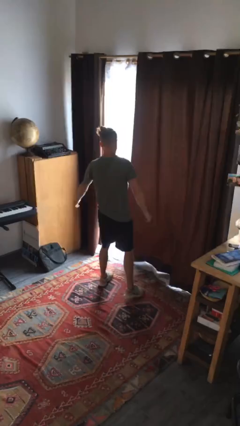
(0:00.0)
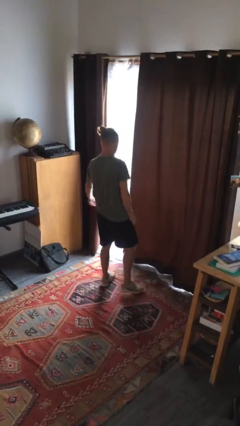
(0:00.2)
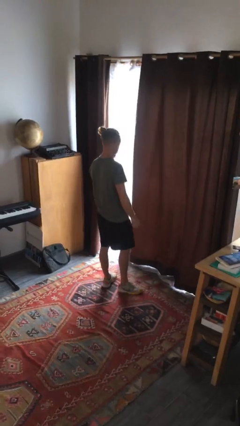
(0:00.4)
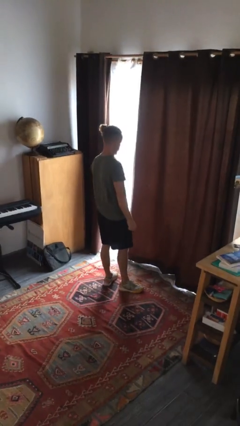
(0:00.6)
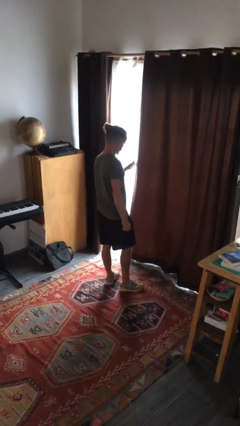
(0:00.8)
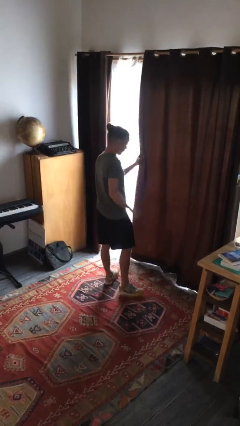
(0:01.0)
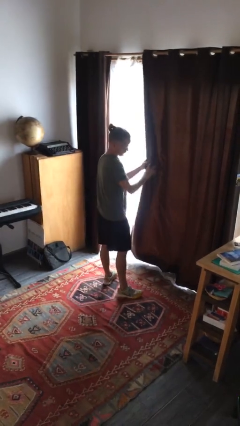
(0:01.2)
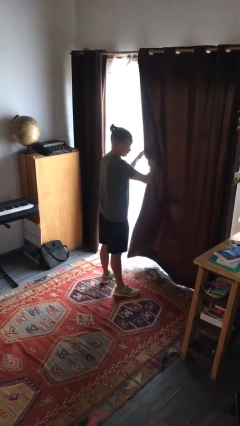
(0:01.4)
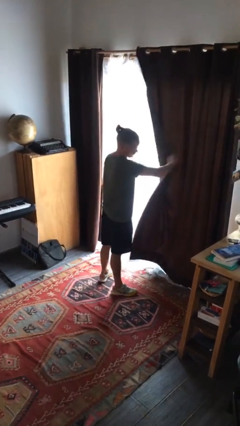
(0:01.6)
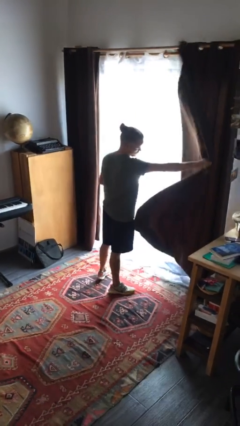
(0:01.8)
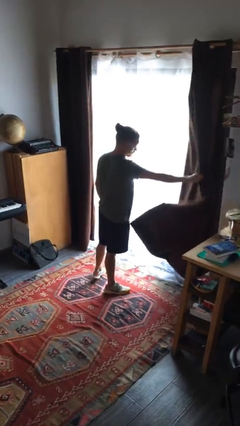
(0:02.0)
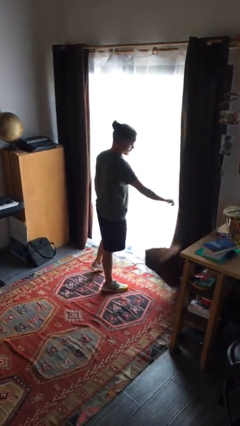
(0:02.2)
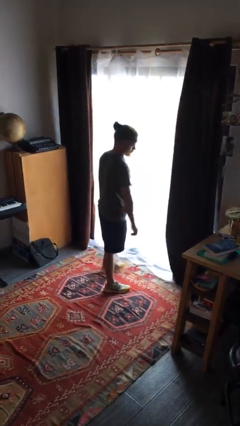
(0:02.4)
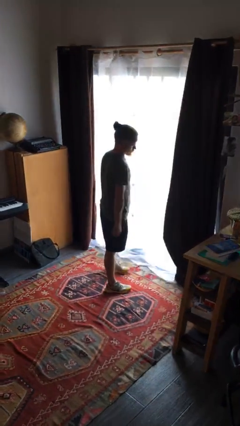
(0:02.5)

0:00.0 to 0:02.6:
person opens curtains

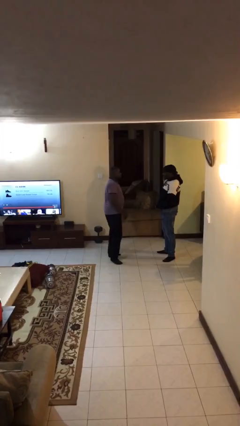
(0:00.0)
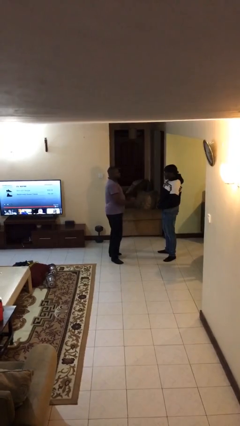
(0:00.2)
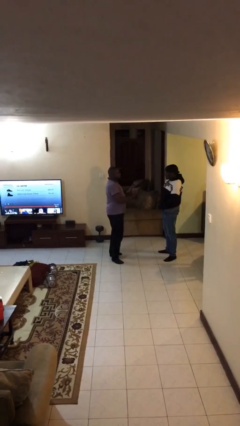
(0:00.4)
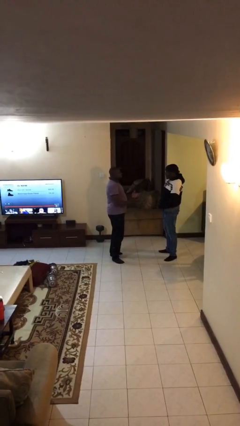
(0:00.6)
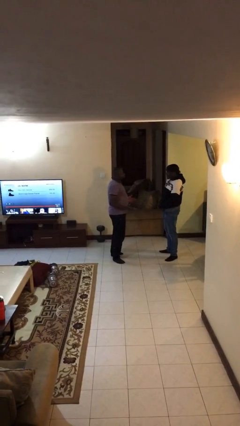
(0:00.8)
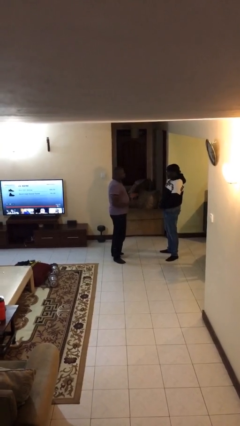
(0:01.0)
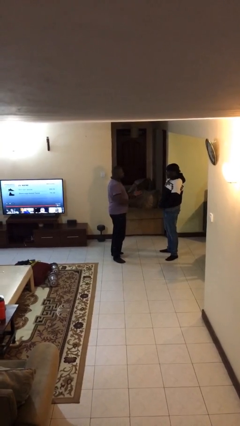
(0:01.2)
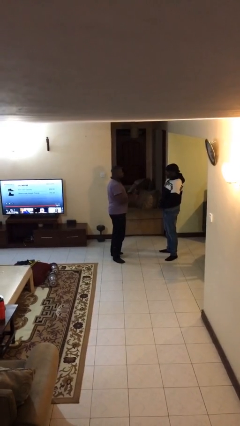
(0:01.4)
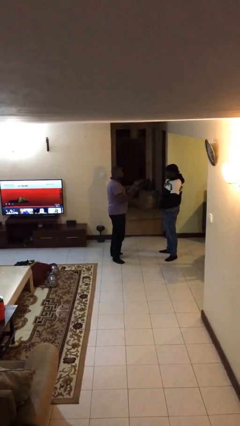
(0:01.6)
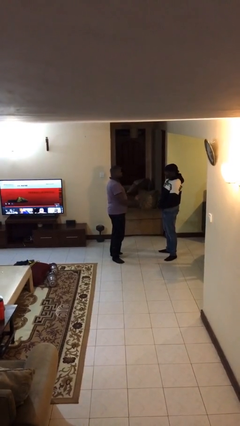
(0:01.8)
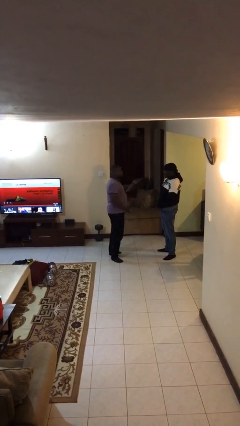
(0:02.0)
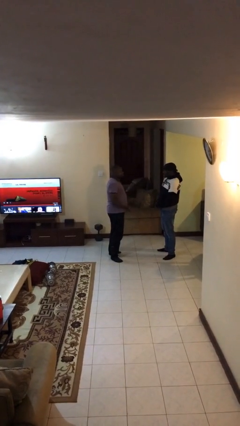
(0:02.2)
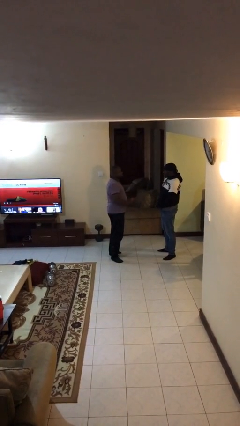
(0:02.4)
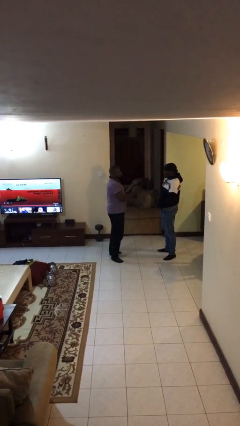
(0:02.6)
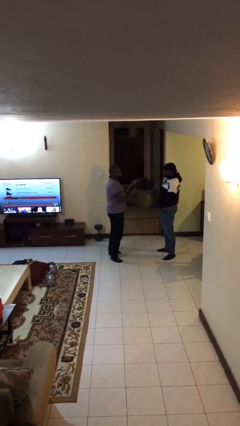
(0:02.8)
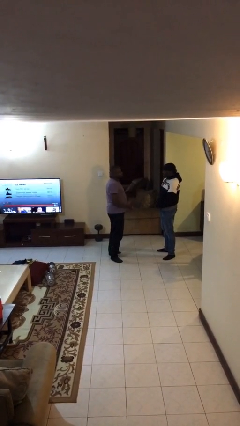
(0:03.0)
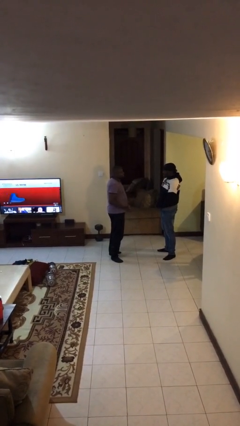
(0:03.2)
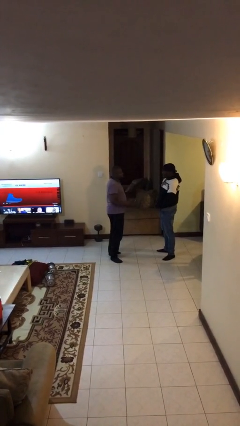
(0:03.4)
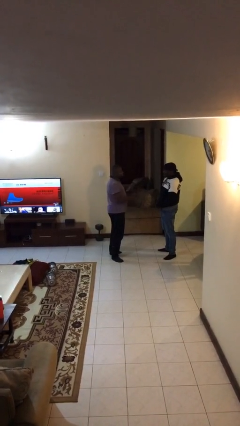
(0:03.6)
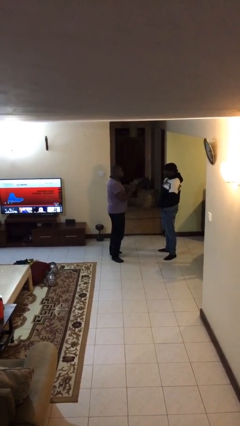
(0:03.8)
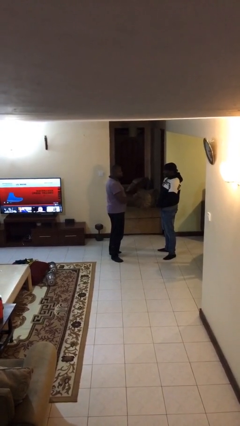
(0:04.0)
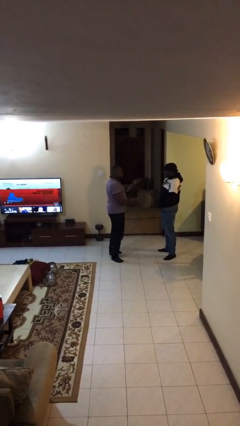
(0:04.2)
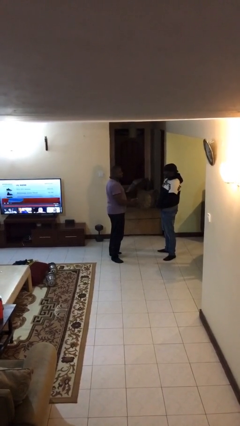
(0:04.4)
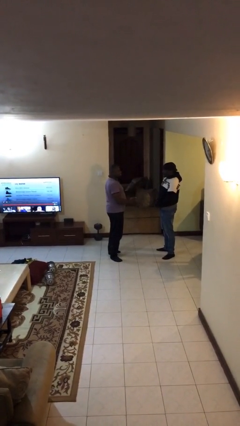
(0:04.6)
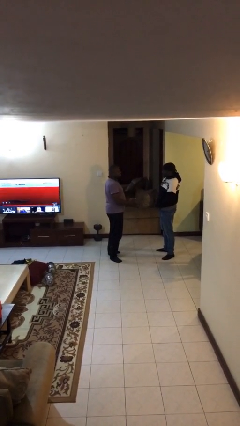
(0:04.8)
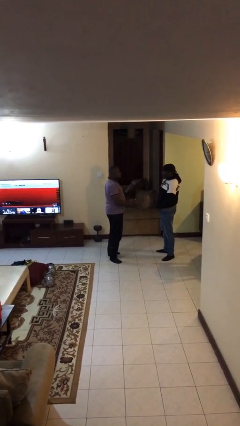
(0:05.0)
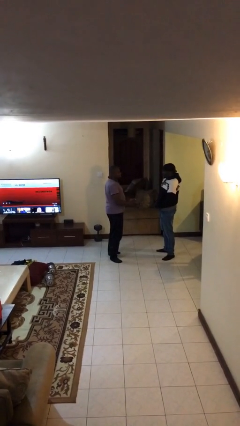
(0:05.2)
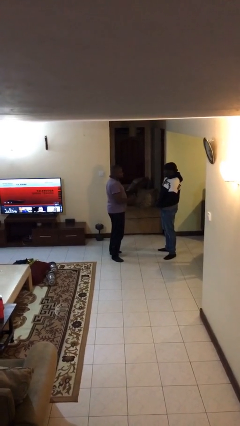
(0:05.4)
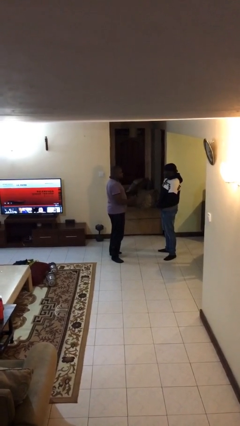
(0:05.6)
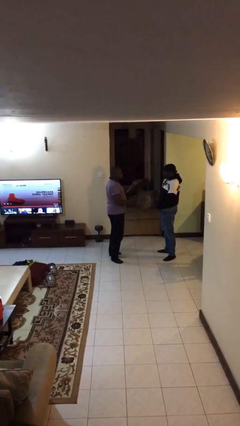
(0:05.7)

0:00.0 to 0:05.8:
person talks to person

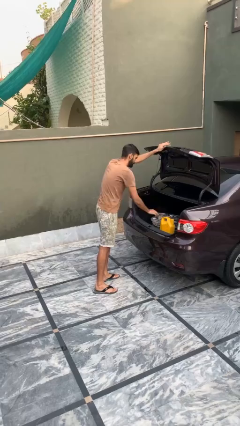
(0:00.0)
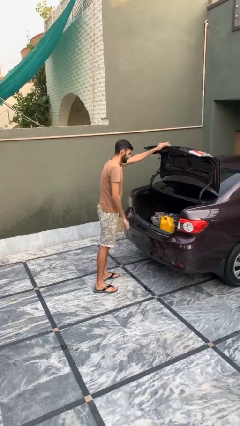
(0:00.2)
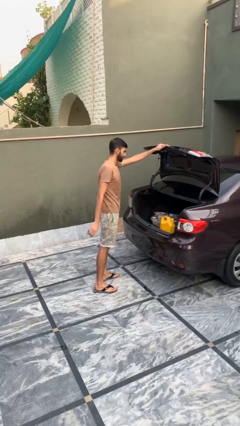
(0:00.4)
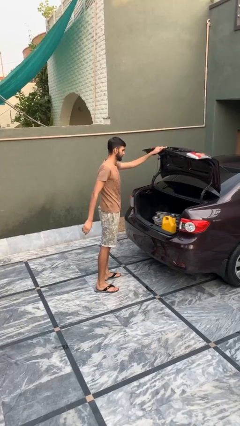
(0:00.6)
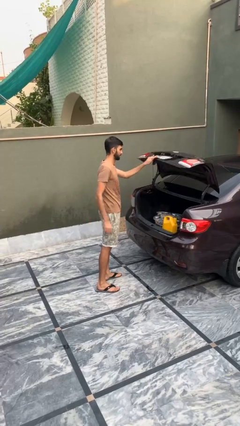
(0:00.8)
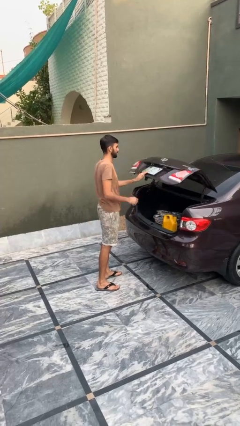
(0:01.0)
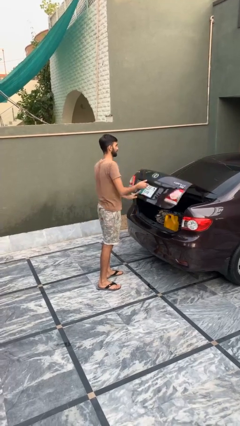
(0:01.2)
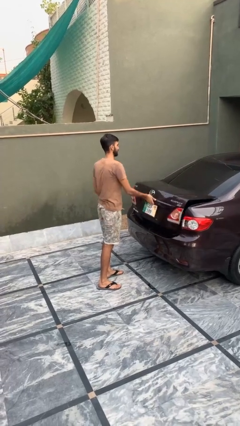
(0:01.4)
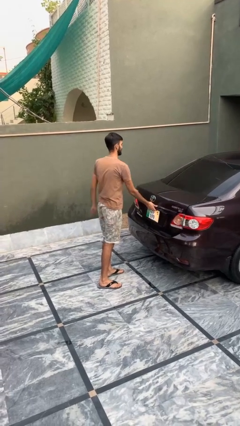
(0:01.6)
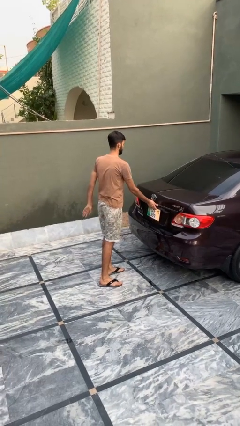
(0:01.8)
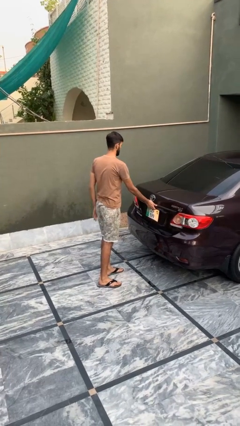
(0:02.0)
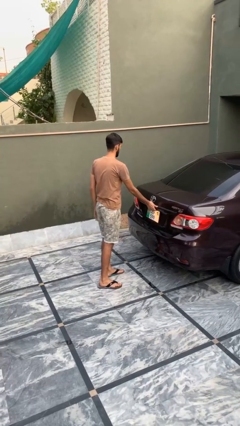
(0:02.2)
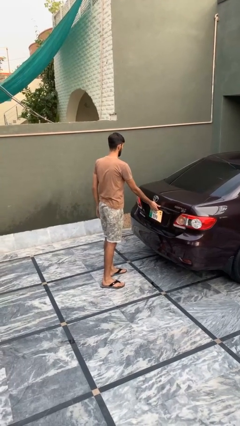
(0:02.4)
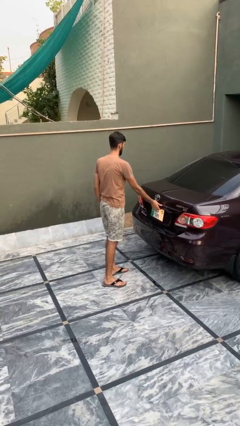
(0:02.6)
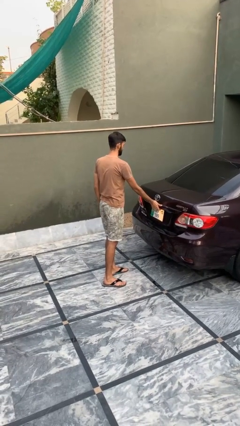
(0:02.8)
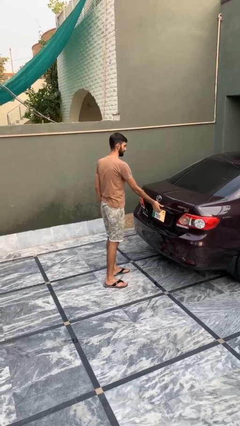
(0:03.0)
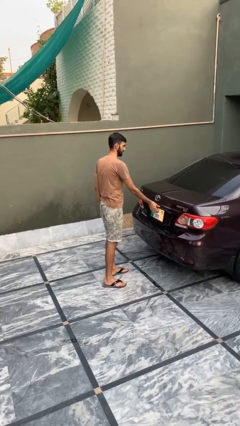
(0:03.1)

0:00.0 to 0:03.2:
person closes car trunk

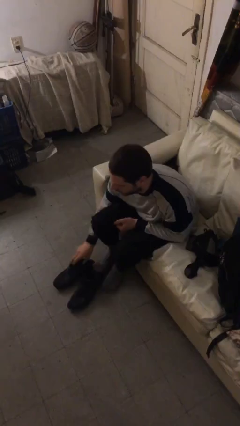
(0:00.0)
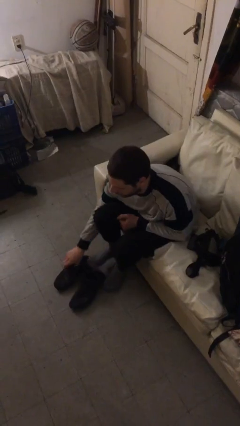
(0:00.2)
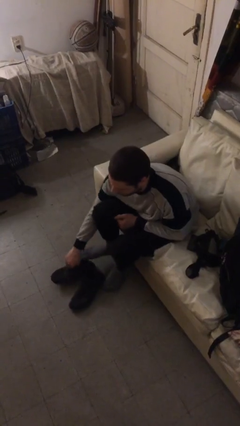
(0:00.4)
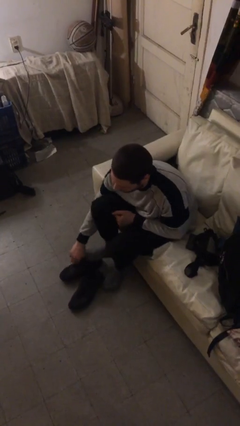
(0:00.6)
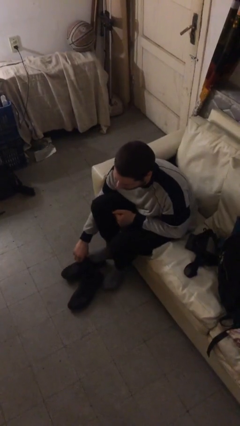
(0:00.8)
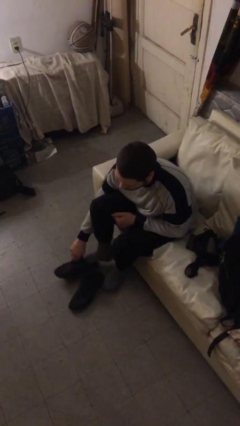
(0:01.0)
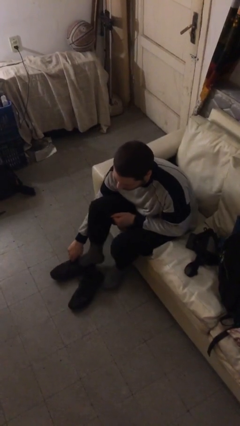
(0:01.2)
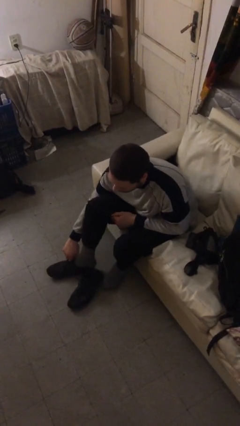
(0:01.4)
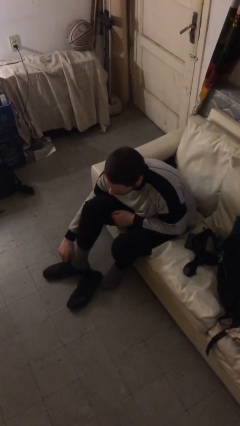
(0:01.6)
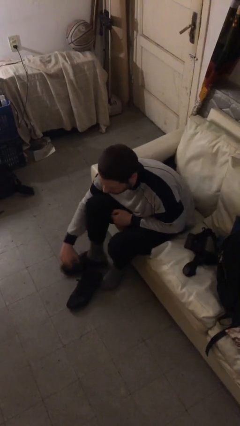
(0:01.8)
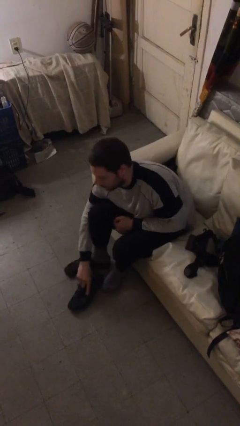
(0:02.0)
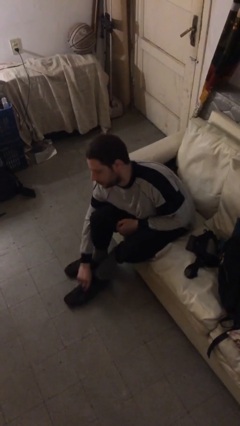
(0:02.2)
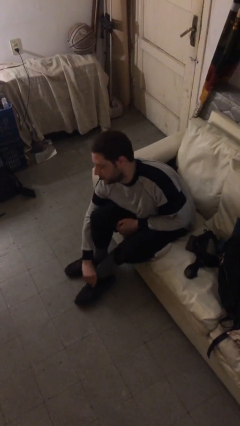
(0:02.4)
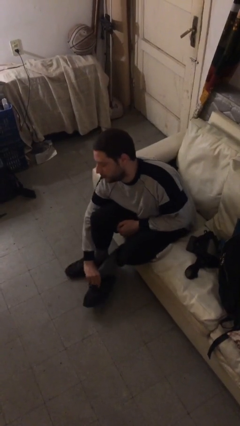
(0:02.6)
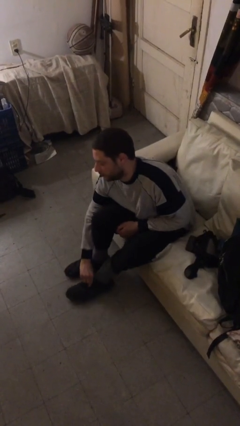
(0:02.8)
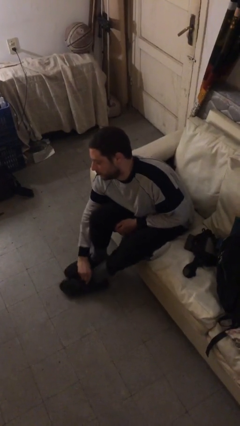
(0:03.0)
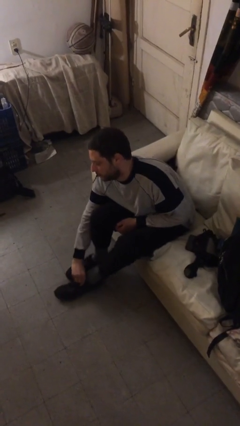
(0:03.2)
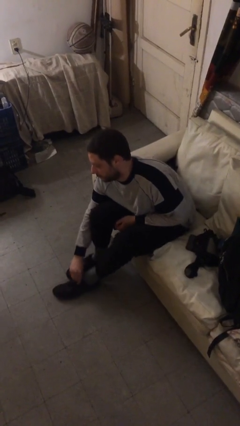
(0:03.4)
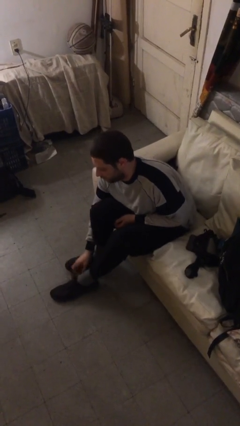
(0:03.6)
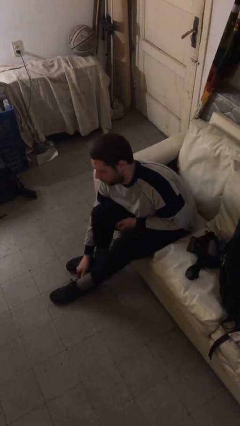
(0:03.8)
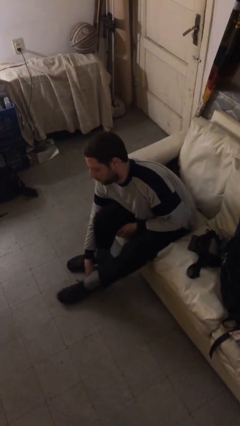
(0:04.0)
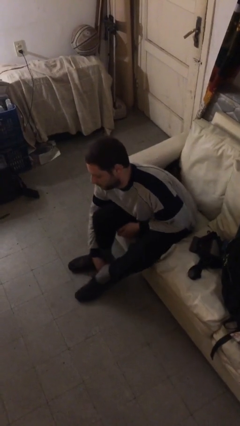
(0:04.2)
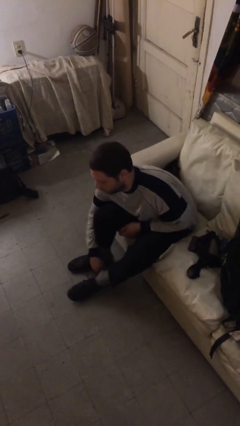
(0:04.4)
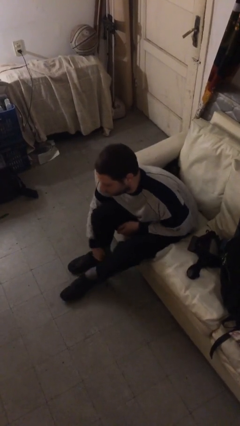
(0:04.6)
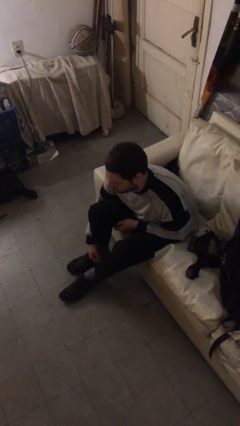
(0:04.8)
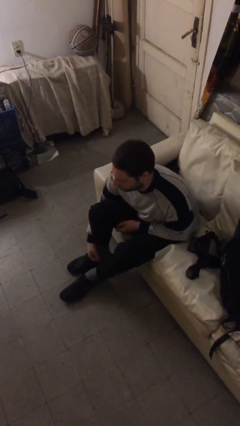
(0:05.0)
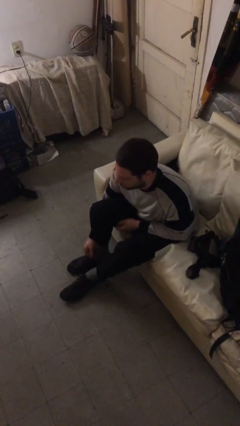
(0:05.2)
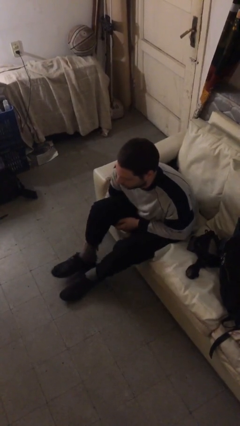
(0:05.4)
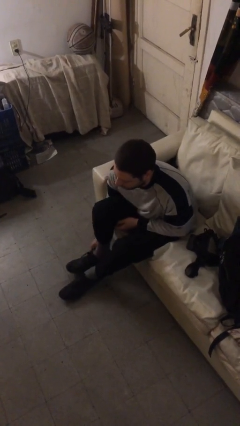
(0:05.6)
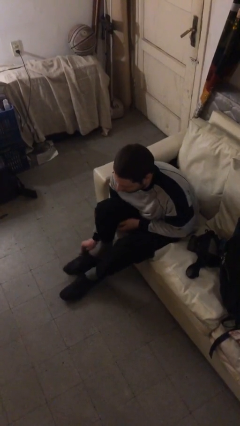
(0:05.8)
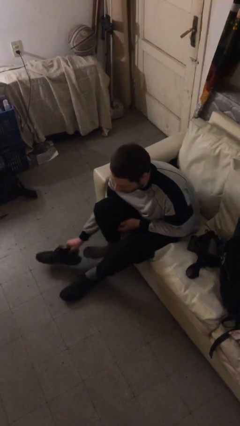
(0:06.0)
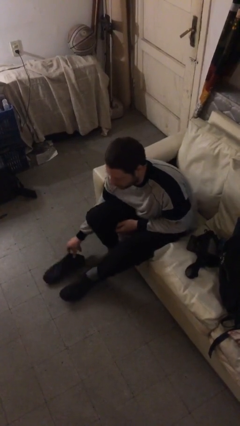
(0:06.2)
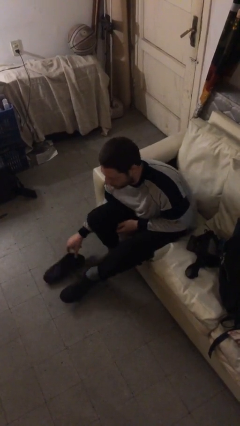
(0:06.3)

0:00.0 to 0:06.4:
person puts on shoes
